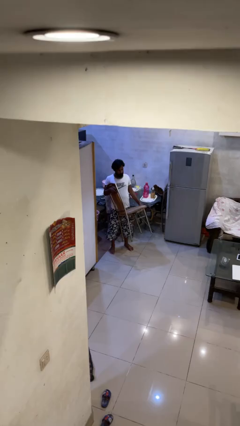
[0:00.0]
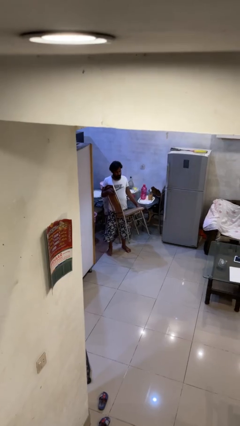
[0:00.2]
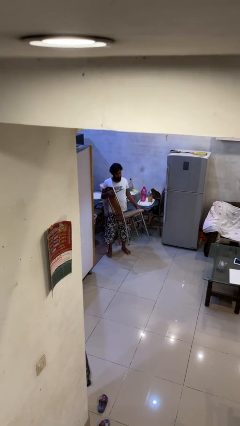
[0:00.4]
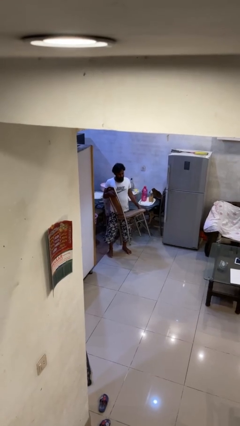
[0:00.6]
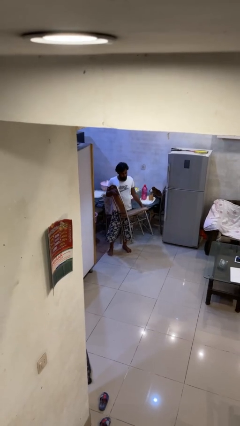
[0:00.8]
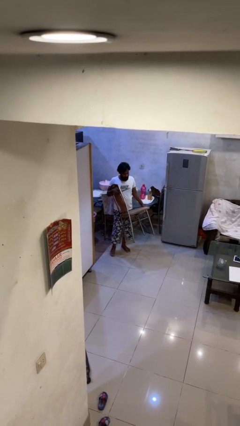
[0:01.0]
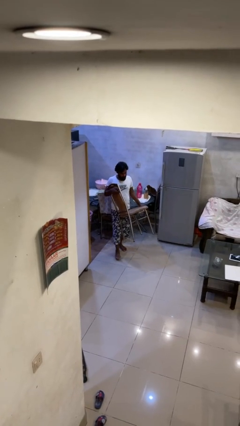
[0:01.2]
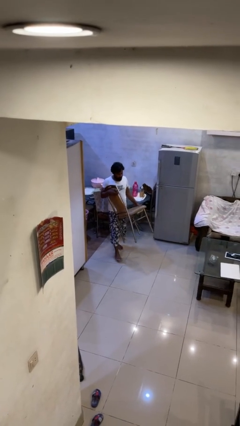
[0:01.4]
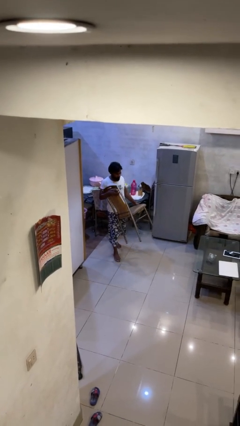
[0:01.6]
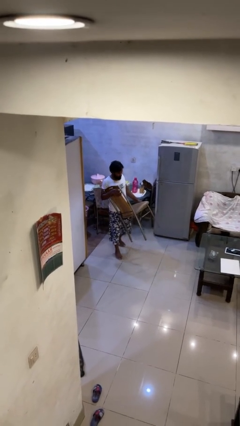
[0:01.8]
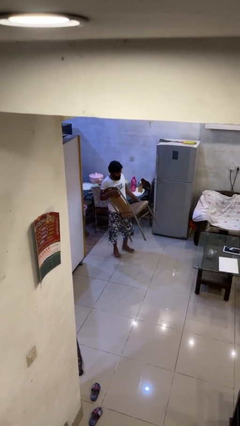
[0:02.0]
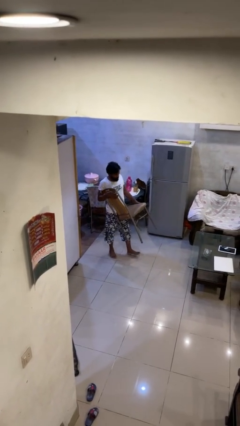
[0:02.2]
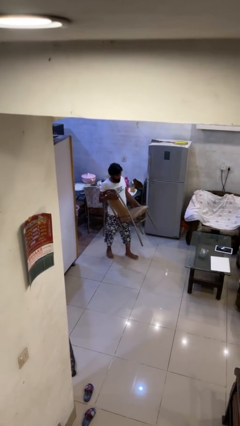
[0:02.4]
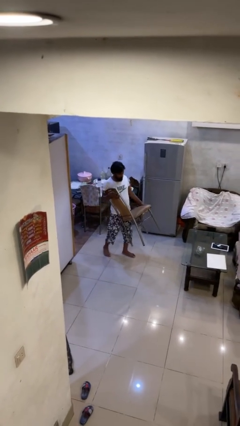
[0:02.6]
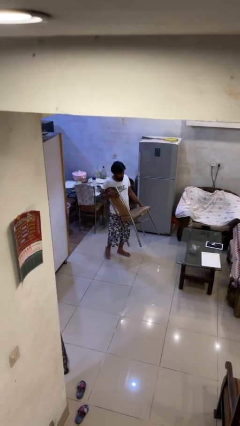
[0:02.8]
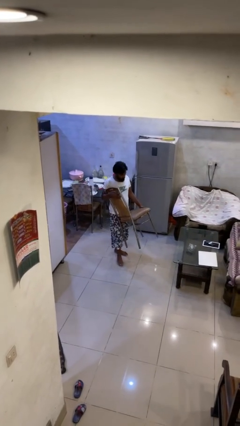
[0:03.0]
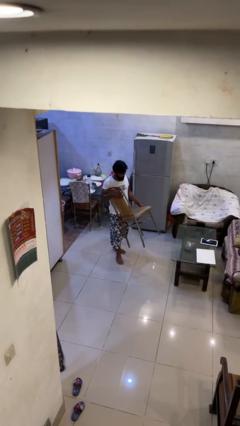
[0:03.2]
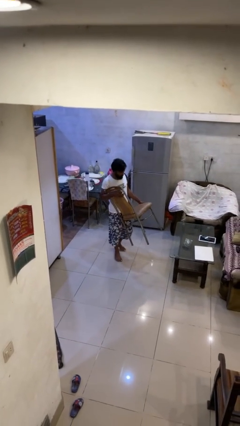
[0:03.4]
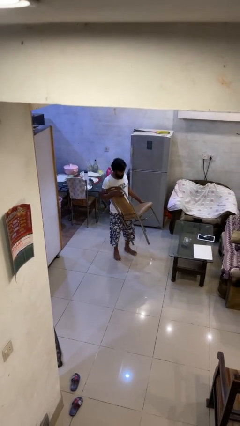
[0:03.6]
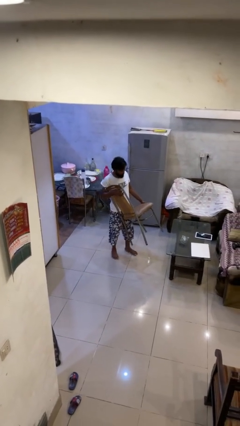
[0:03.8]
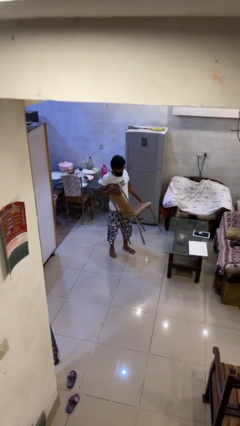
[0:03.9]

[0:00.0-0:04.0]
person carries furniture

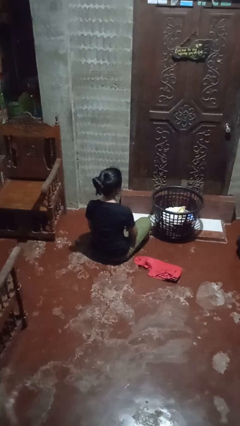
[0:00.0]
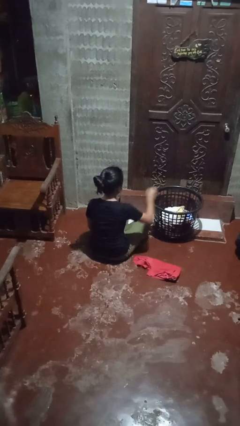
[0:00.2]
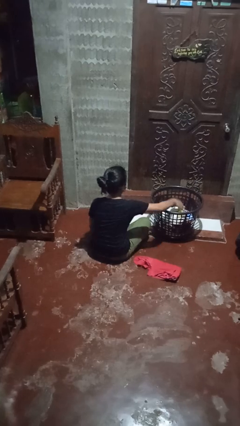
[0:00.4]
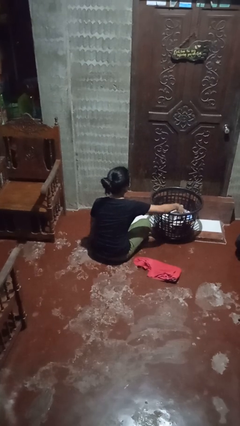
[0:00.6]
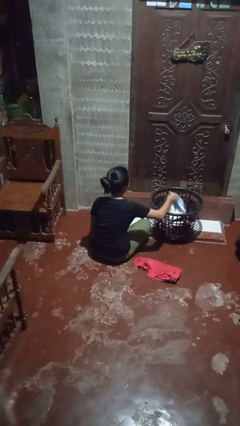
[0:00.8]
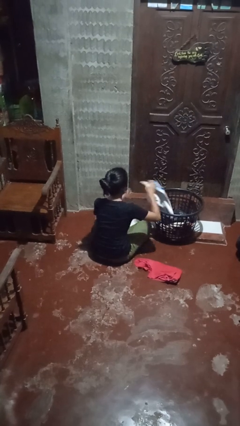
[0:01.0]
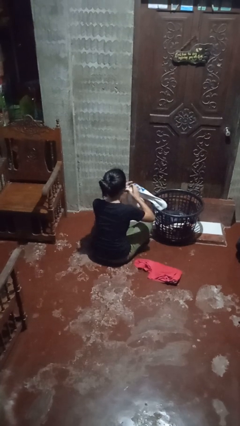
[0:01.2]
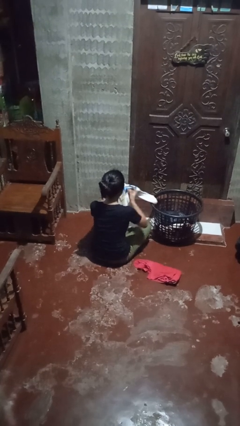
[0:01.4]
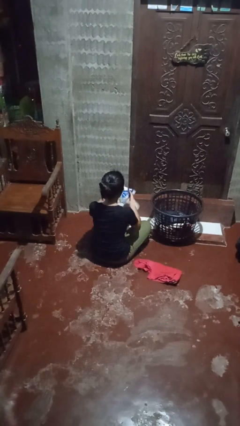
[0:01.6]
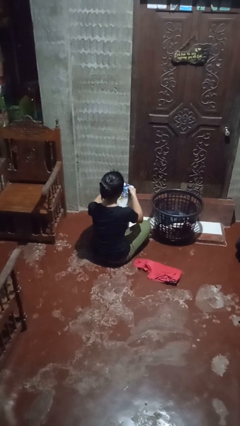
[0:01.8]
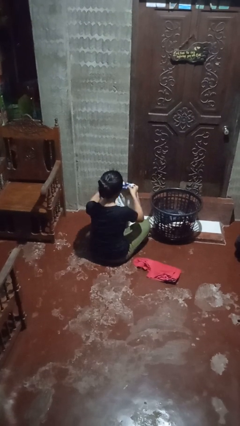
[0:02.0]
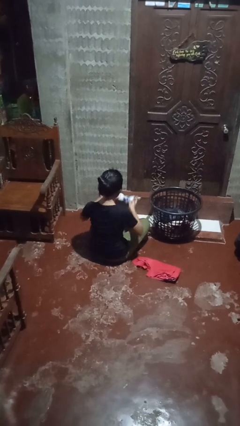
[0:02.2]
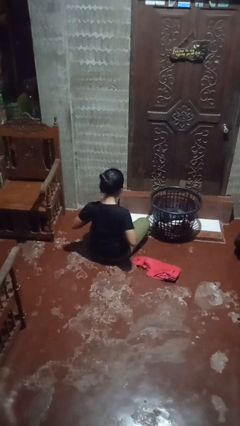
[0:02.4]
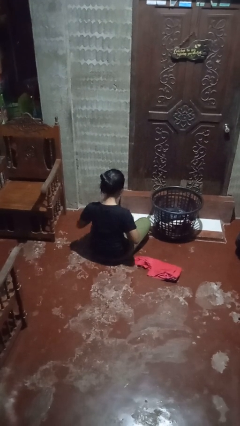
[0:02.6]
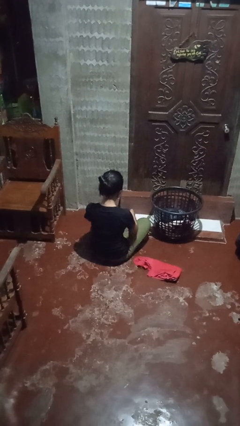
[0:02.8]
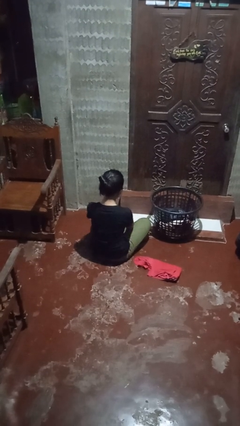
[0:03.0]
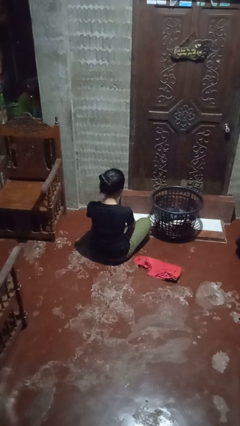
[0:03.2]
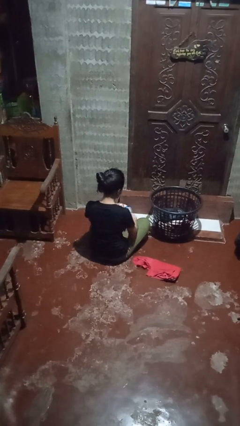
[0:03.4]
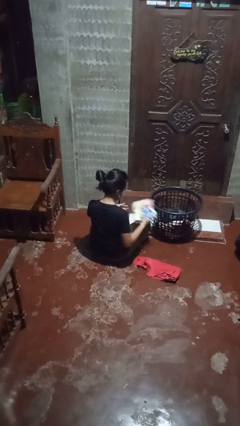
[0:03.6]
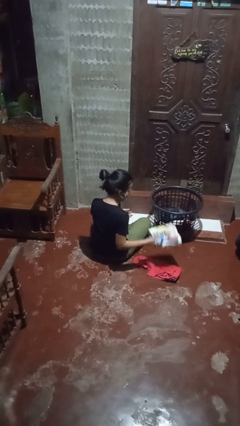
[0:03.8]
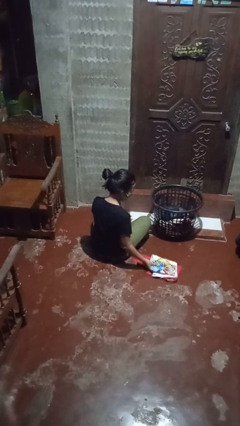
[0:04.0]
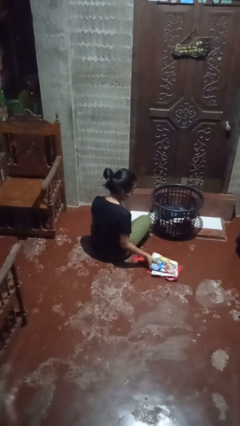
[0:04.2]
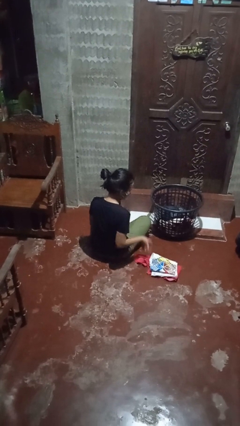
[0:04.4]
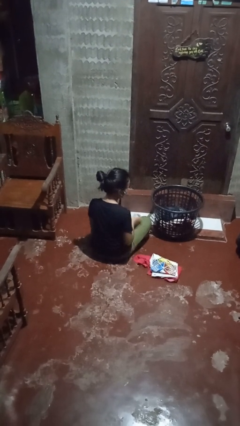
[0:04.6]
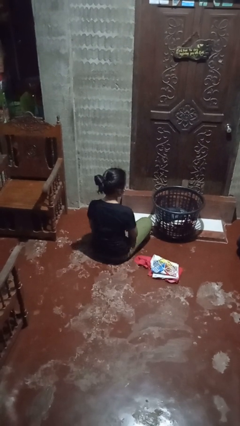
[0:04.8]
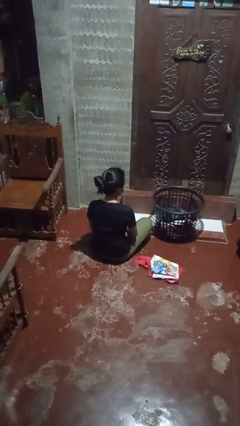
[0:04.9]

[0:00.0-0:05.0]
person folds shirt

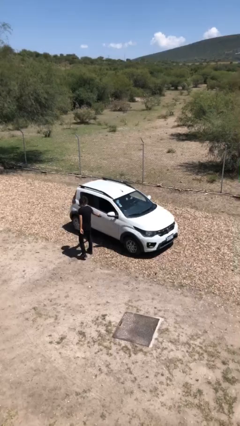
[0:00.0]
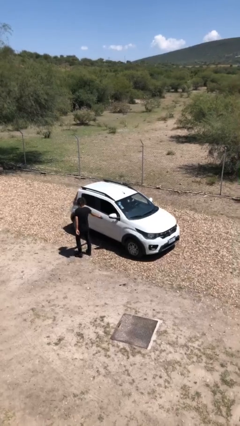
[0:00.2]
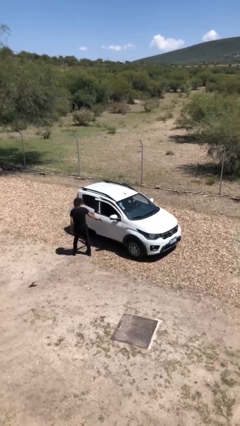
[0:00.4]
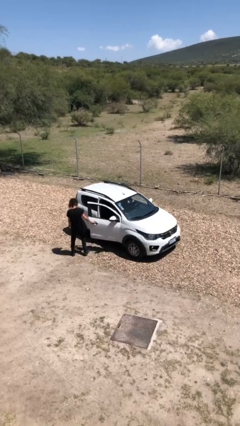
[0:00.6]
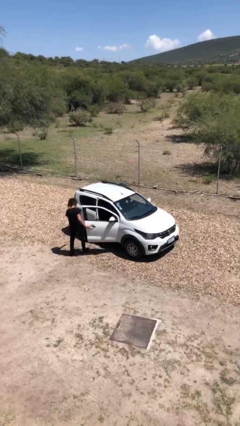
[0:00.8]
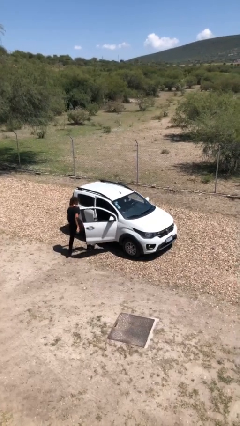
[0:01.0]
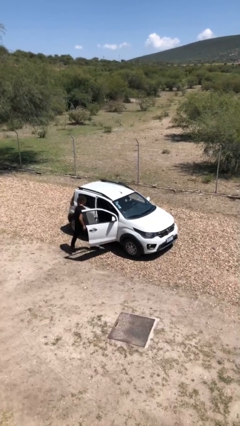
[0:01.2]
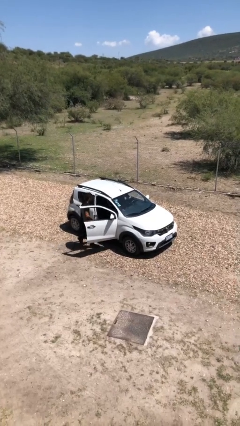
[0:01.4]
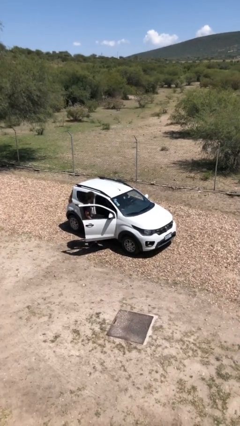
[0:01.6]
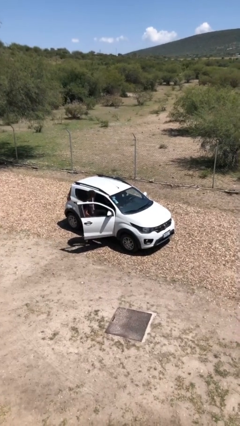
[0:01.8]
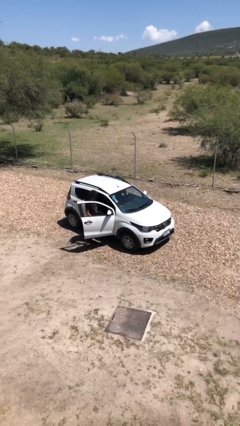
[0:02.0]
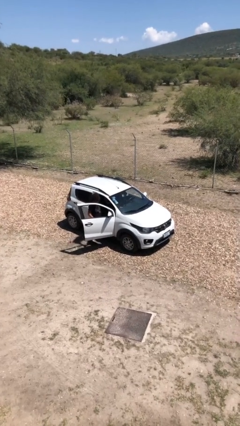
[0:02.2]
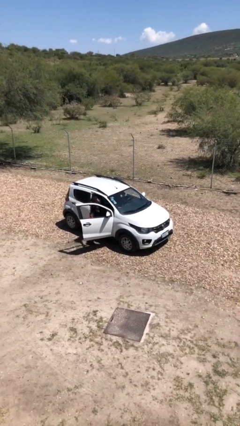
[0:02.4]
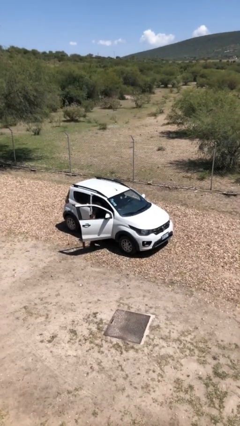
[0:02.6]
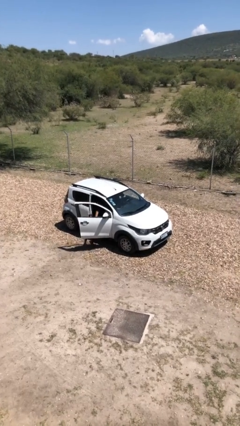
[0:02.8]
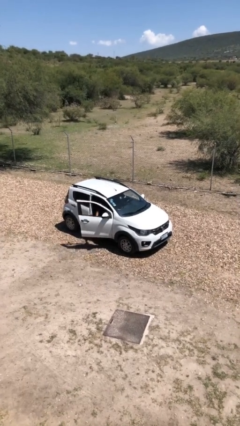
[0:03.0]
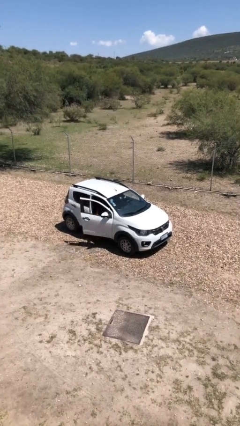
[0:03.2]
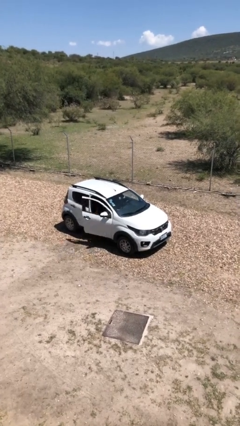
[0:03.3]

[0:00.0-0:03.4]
car picks up person

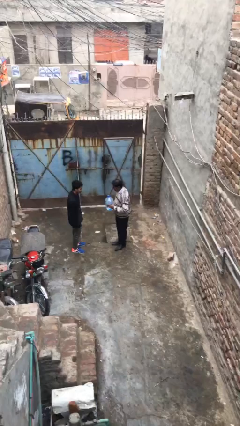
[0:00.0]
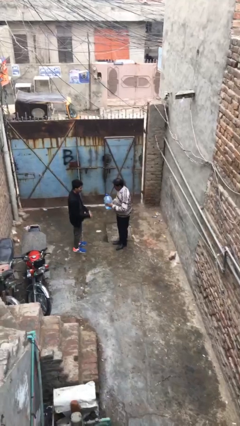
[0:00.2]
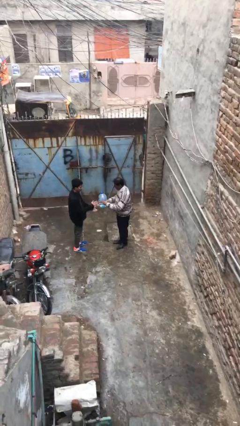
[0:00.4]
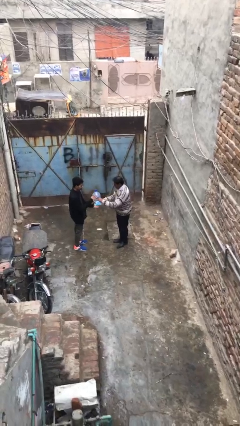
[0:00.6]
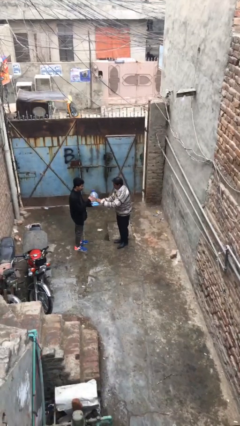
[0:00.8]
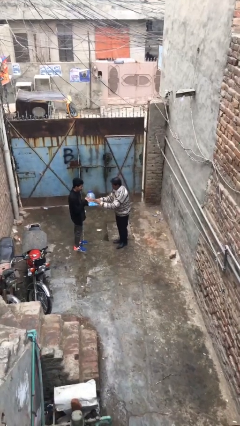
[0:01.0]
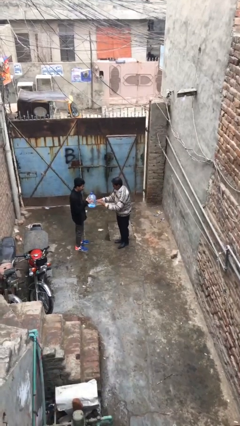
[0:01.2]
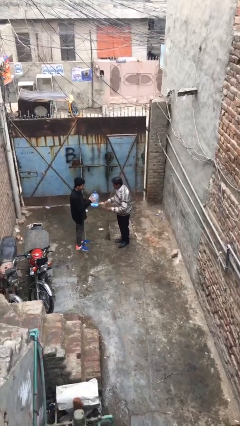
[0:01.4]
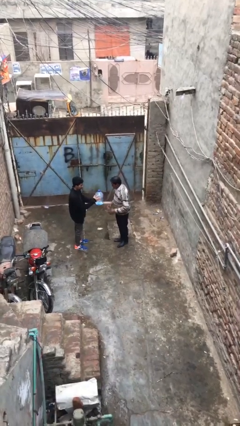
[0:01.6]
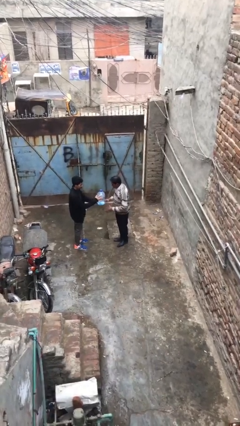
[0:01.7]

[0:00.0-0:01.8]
person transfers object to person

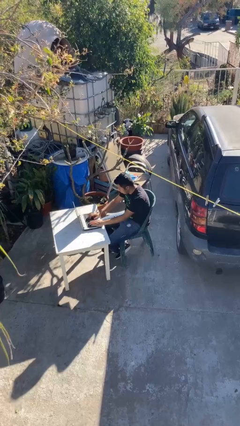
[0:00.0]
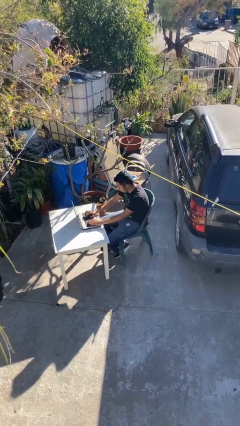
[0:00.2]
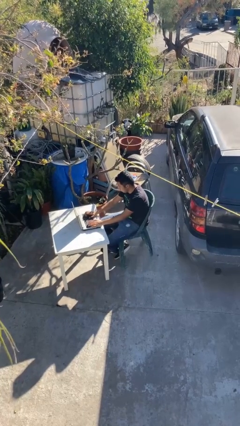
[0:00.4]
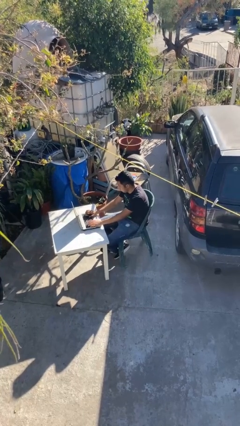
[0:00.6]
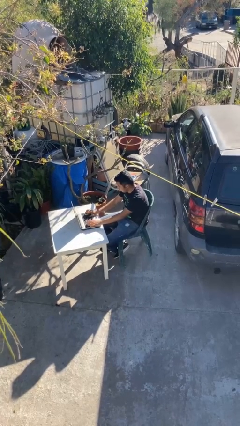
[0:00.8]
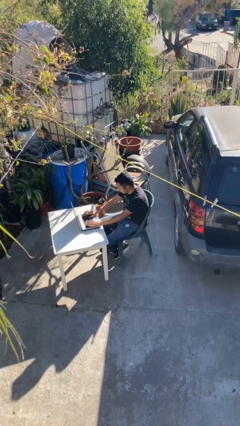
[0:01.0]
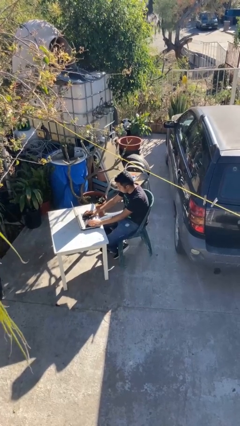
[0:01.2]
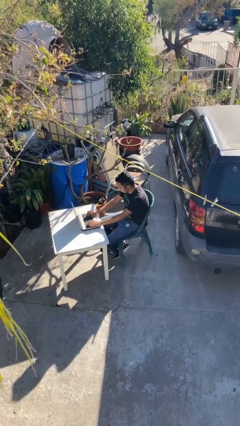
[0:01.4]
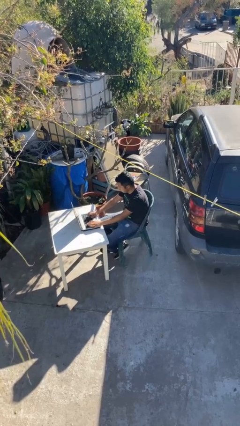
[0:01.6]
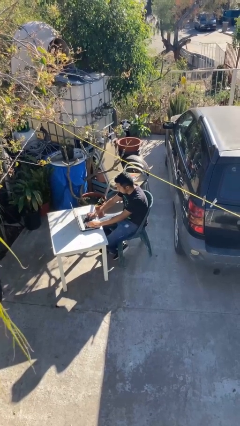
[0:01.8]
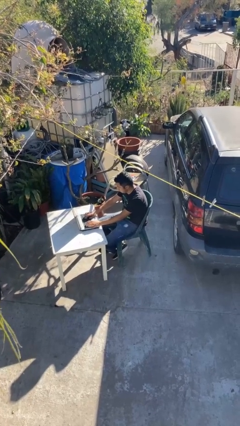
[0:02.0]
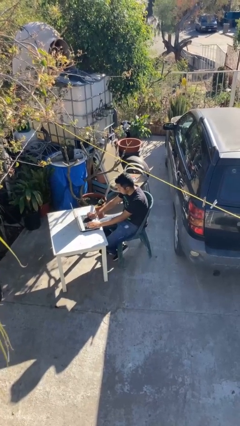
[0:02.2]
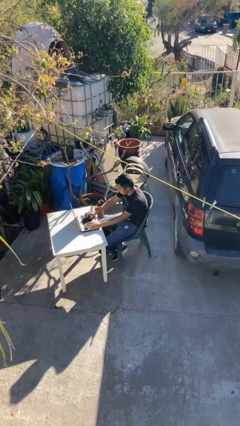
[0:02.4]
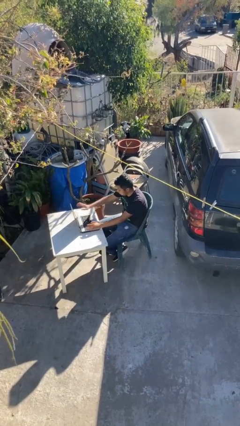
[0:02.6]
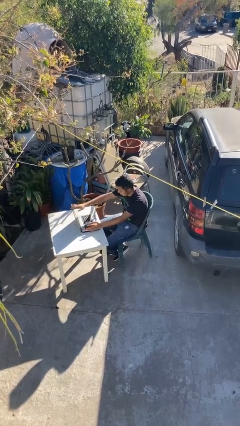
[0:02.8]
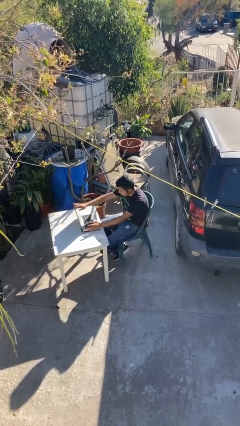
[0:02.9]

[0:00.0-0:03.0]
person interacts with laptop

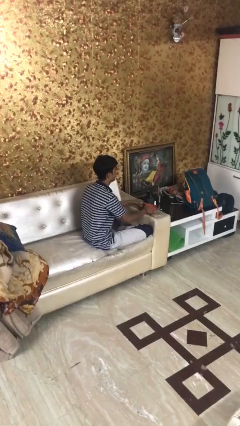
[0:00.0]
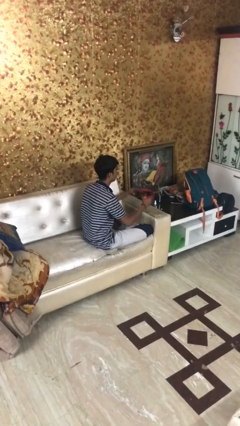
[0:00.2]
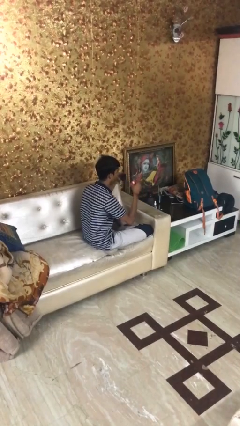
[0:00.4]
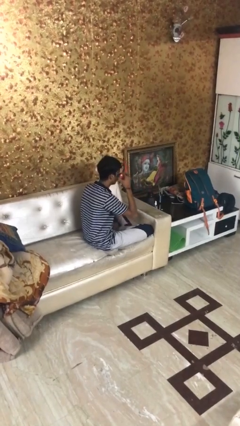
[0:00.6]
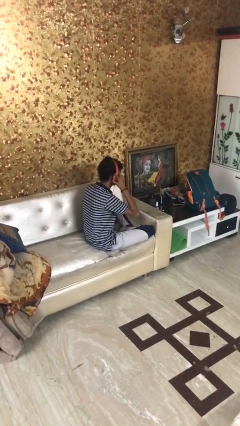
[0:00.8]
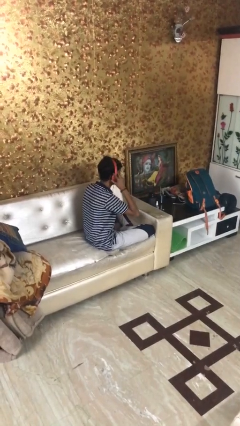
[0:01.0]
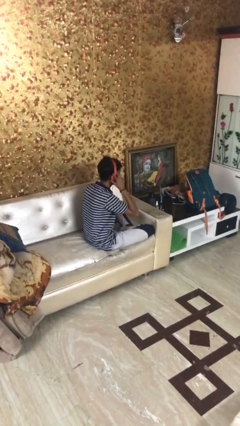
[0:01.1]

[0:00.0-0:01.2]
person puts on headphones
